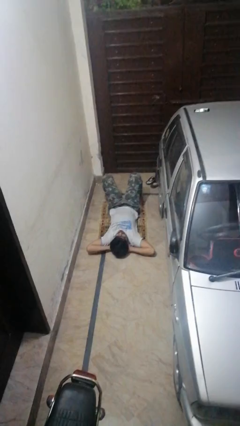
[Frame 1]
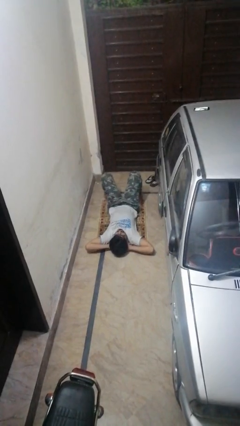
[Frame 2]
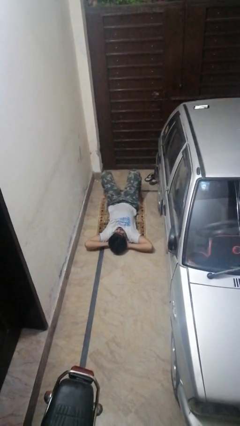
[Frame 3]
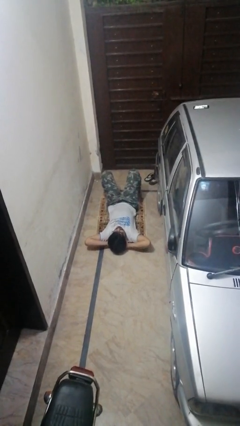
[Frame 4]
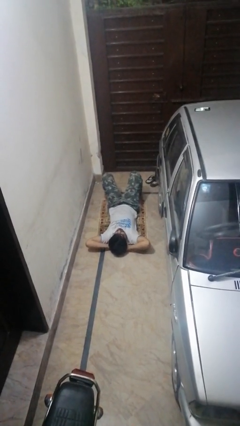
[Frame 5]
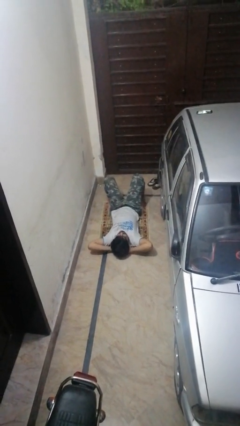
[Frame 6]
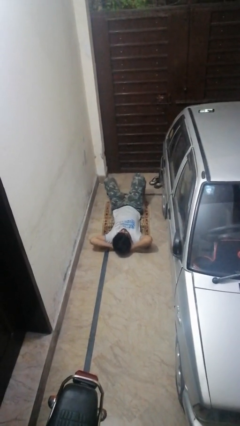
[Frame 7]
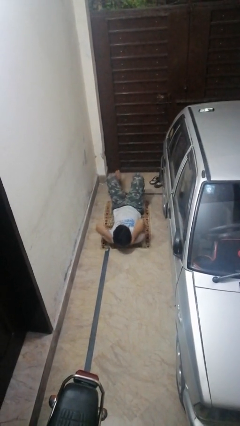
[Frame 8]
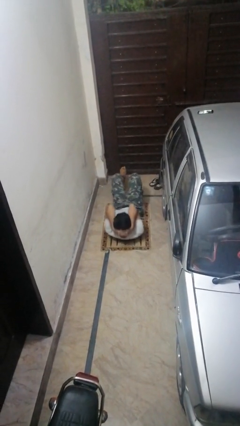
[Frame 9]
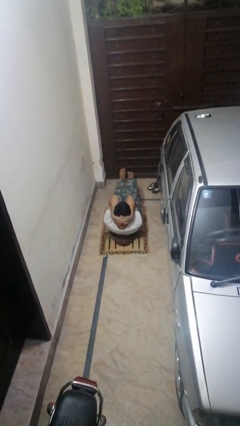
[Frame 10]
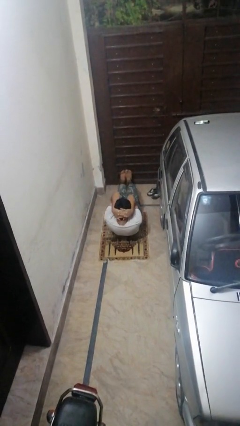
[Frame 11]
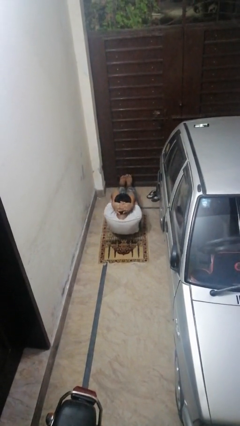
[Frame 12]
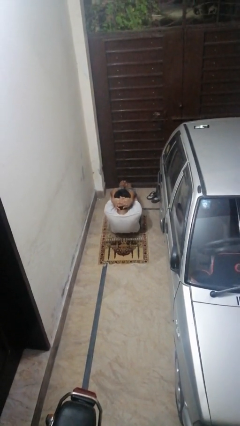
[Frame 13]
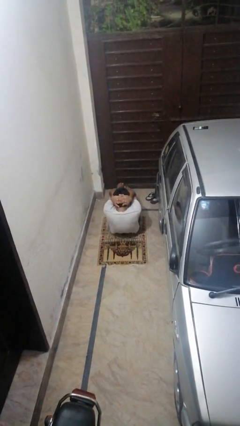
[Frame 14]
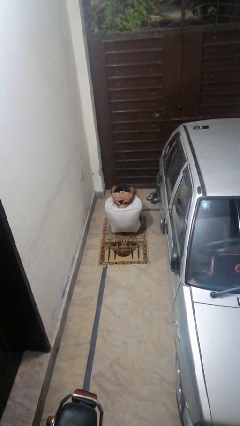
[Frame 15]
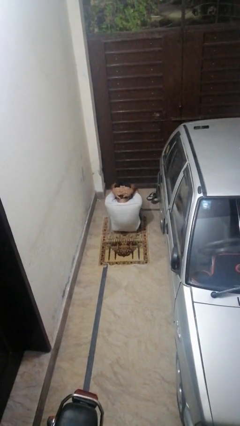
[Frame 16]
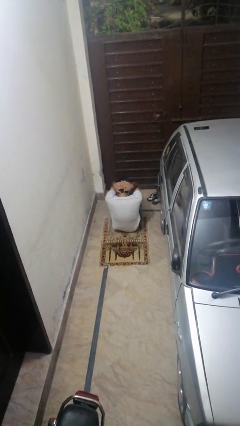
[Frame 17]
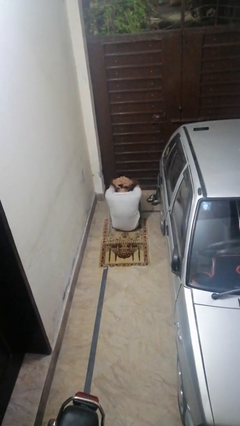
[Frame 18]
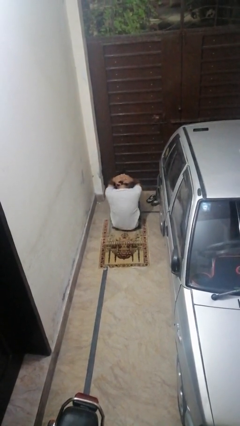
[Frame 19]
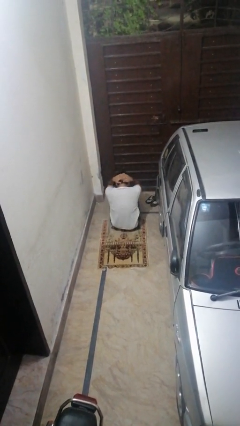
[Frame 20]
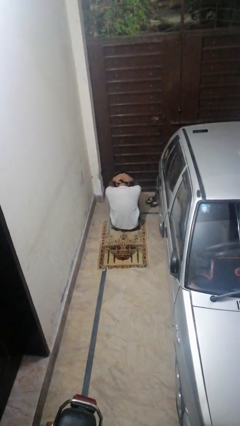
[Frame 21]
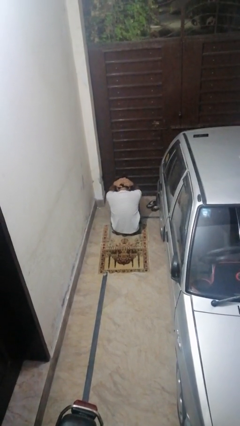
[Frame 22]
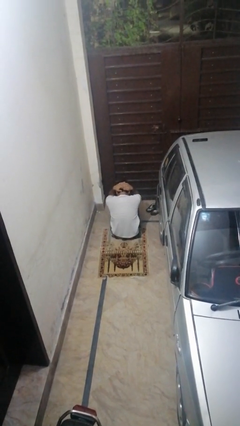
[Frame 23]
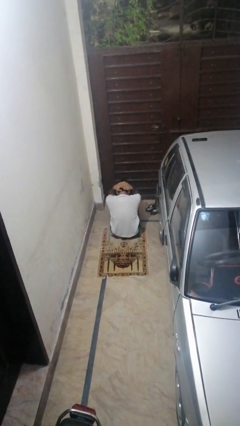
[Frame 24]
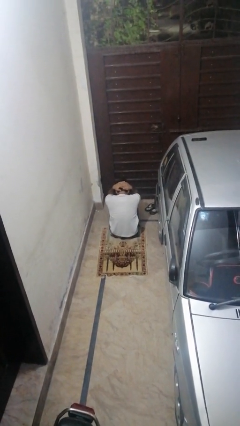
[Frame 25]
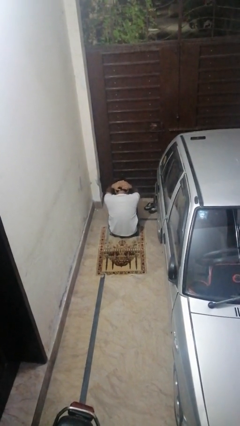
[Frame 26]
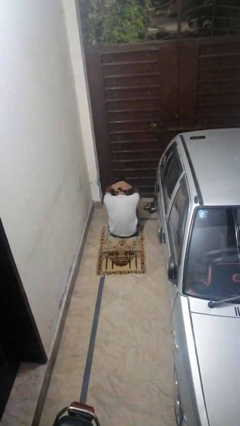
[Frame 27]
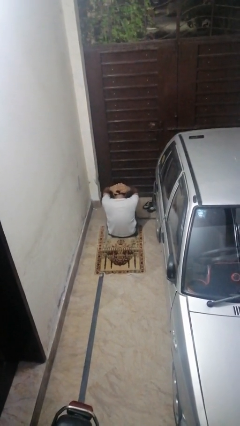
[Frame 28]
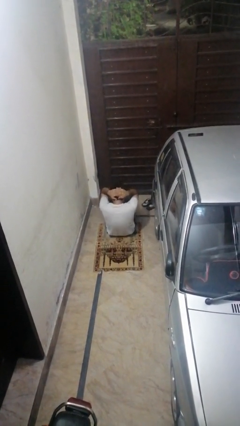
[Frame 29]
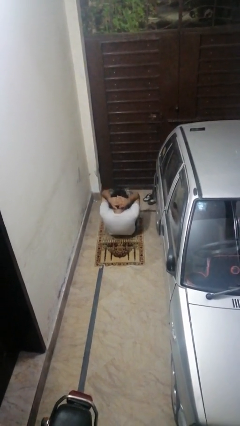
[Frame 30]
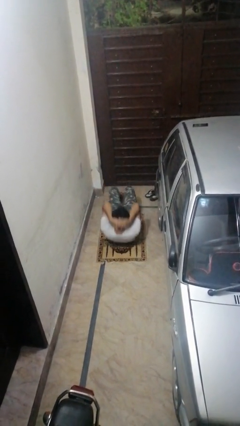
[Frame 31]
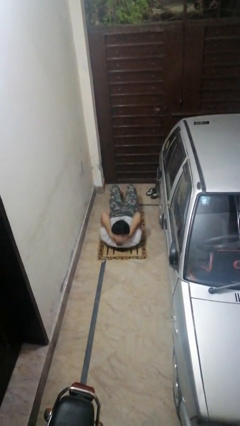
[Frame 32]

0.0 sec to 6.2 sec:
person exercises with situp

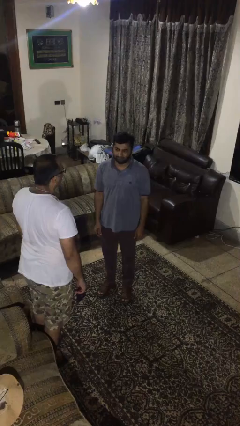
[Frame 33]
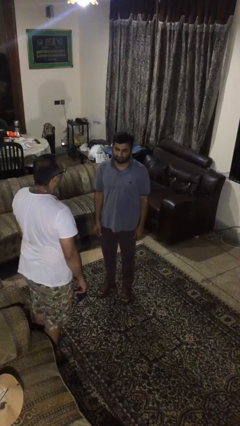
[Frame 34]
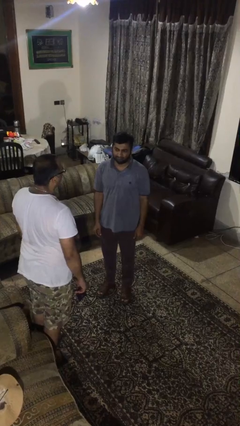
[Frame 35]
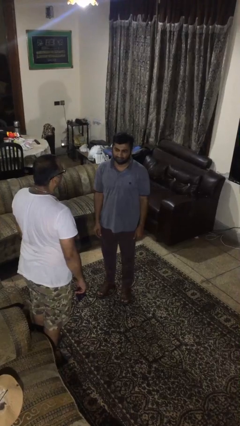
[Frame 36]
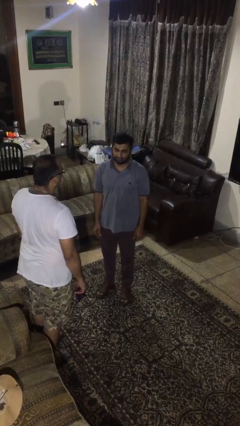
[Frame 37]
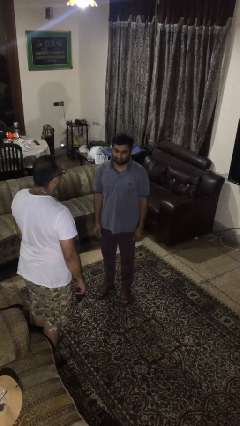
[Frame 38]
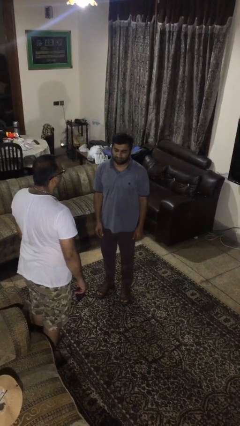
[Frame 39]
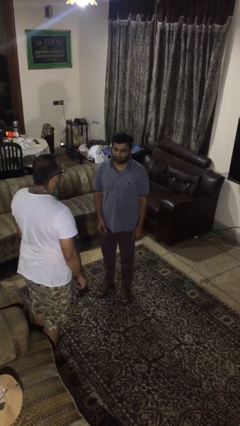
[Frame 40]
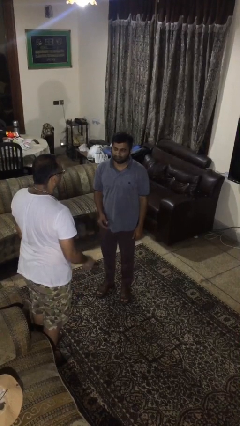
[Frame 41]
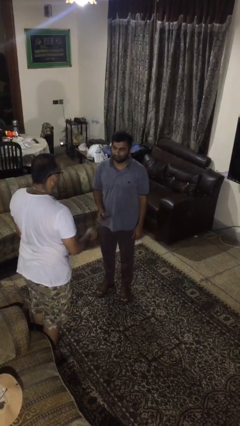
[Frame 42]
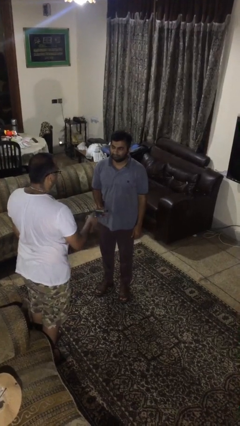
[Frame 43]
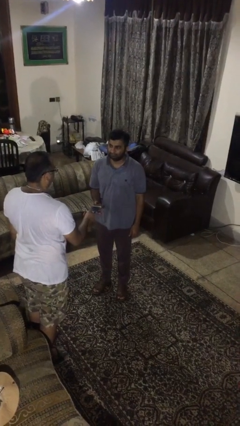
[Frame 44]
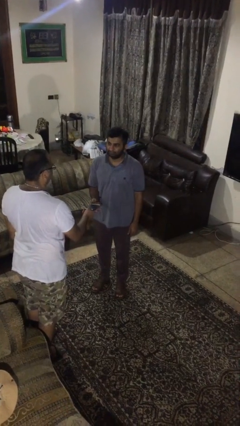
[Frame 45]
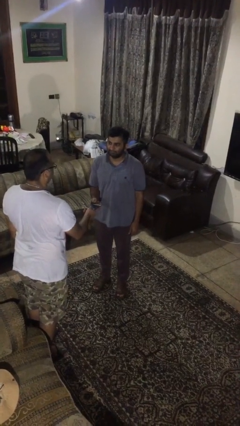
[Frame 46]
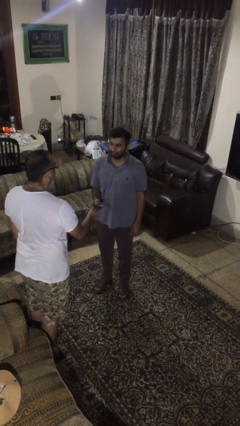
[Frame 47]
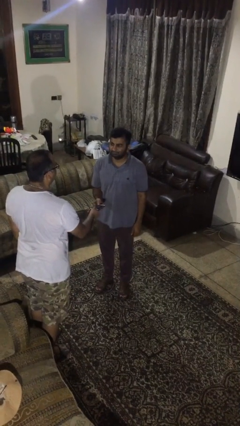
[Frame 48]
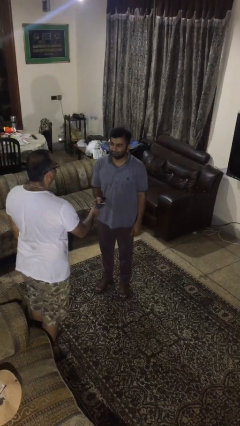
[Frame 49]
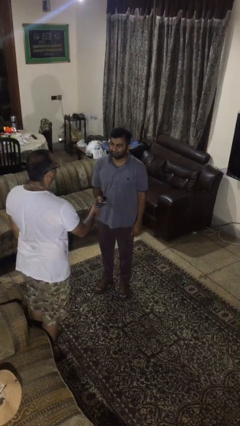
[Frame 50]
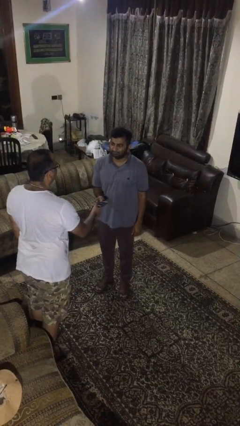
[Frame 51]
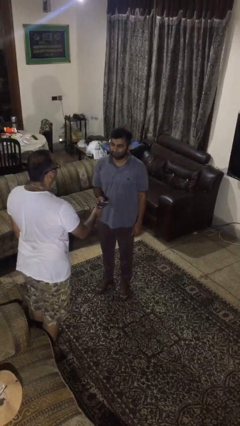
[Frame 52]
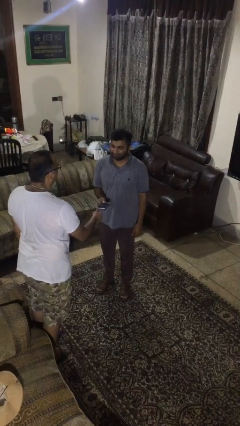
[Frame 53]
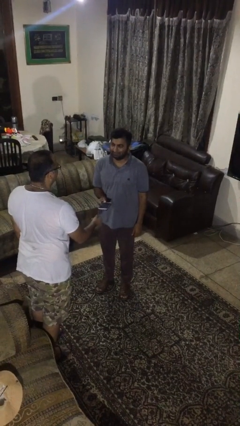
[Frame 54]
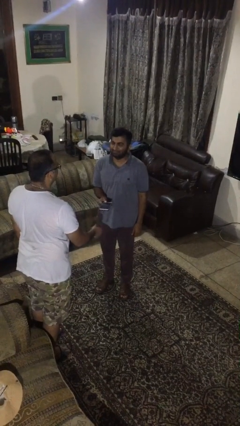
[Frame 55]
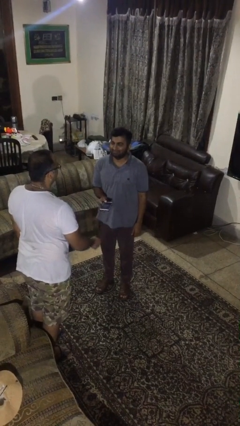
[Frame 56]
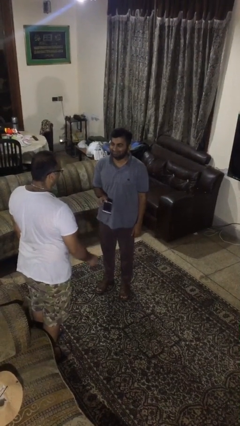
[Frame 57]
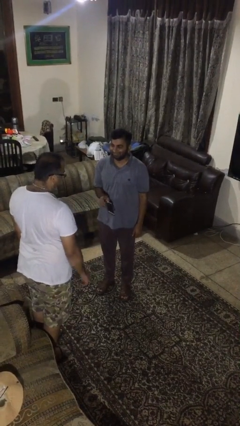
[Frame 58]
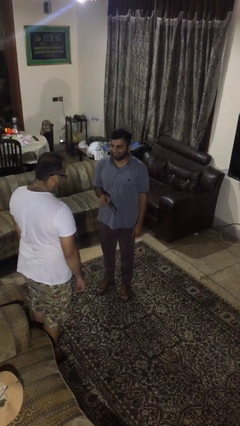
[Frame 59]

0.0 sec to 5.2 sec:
person transfers object to person

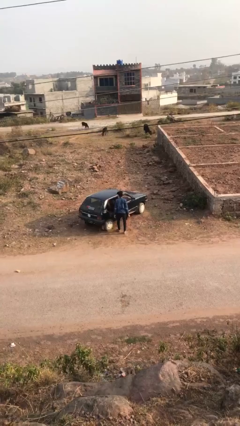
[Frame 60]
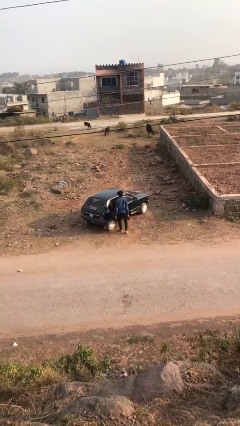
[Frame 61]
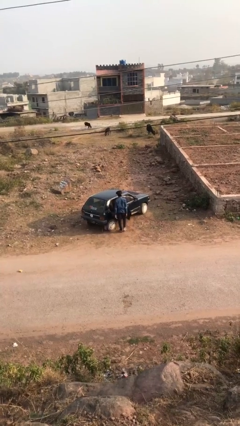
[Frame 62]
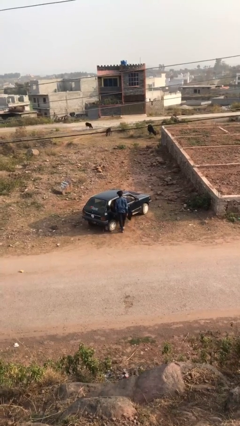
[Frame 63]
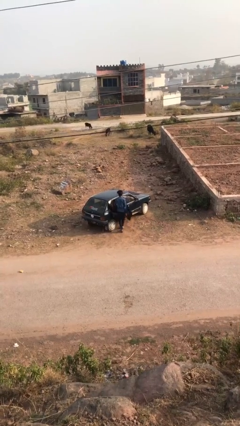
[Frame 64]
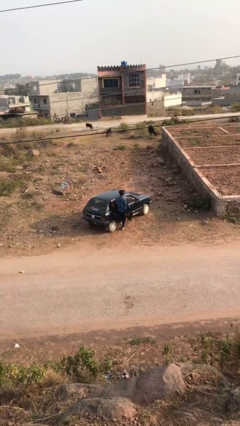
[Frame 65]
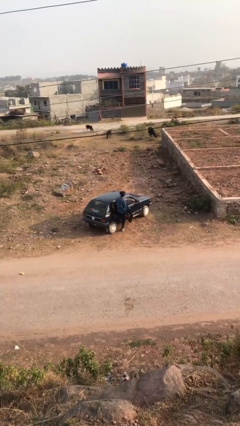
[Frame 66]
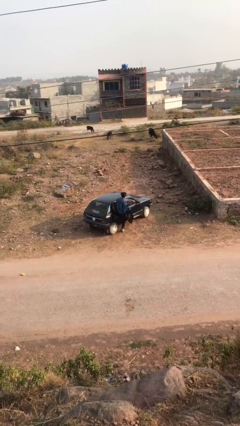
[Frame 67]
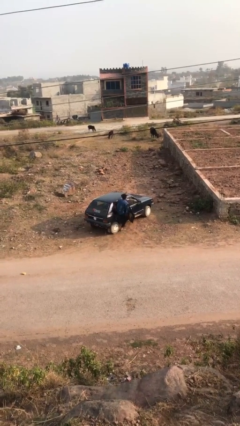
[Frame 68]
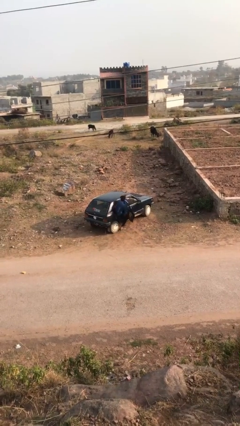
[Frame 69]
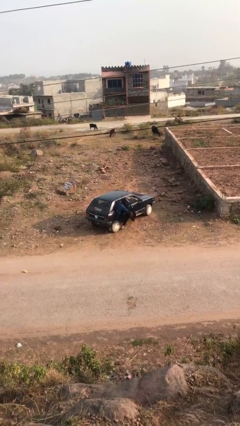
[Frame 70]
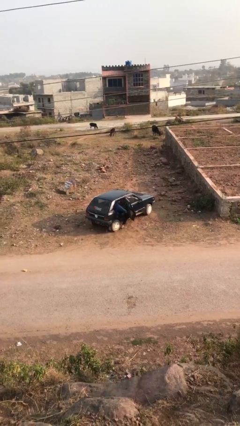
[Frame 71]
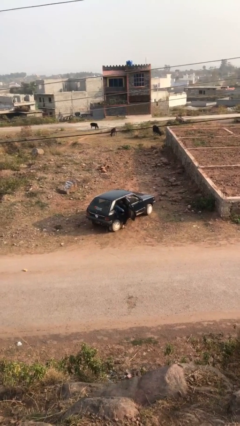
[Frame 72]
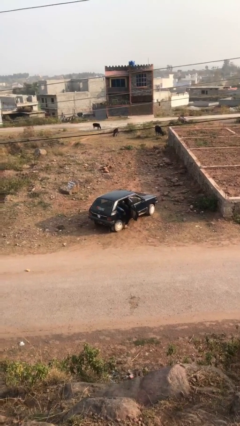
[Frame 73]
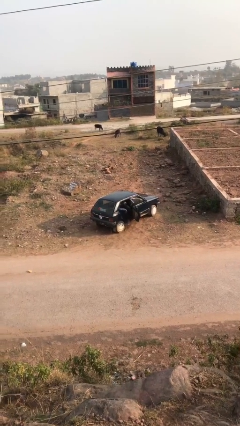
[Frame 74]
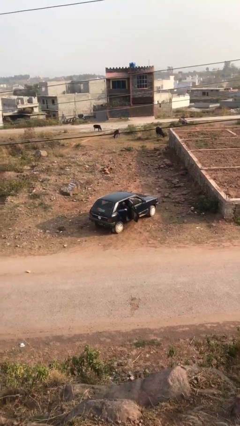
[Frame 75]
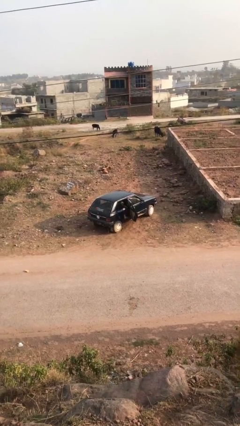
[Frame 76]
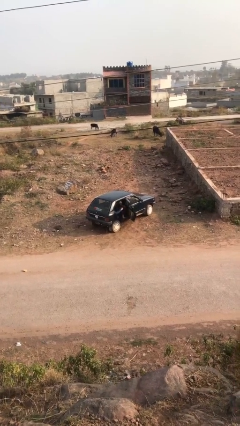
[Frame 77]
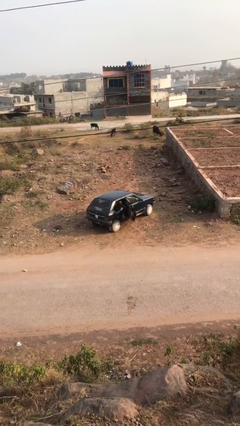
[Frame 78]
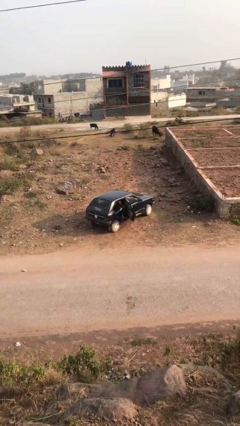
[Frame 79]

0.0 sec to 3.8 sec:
person enters car

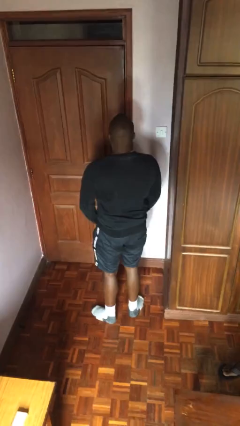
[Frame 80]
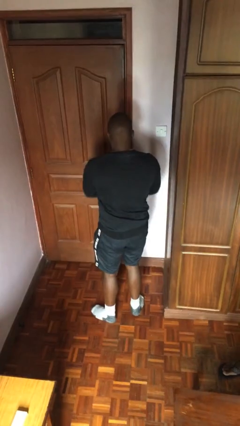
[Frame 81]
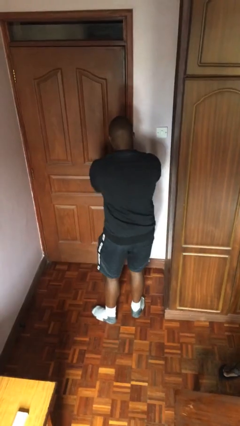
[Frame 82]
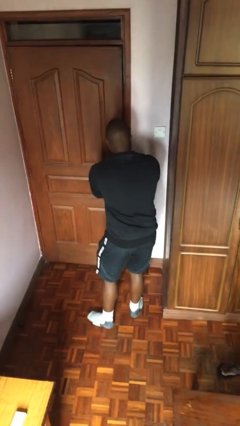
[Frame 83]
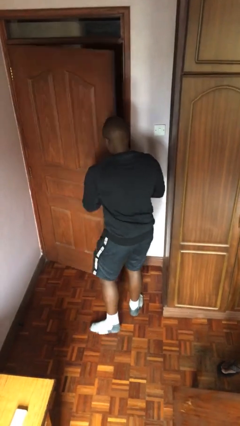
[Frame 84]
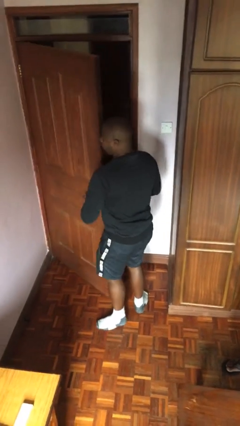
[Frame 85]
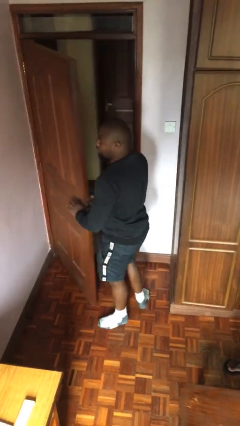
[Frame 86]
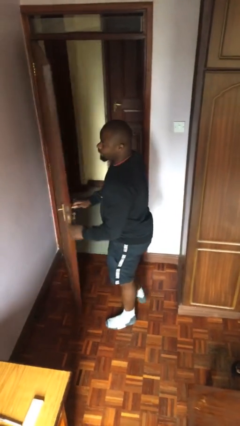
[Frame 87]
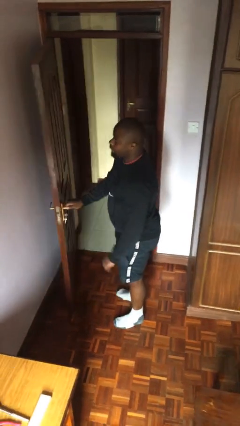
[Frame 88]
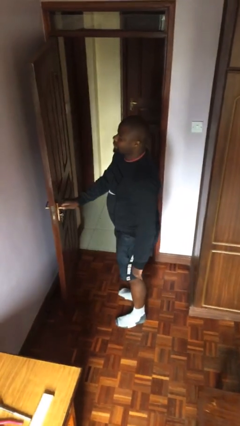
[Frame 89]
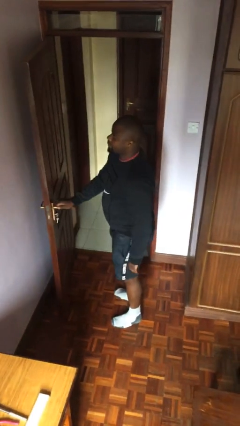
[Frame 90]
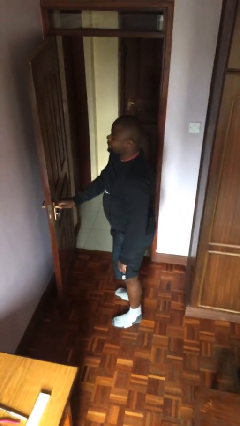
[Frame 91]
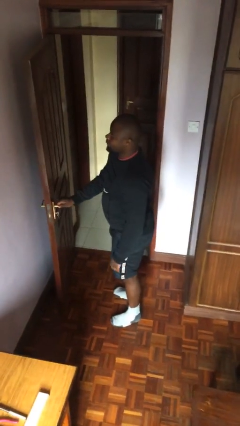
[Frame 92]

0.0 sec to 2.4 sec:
person opens facility door

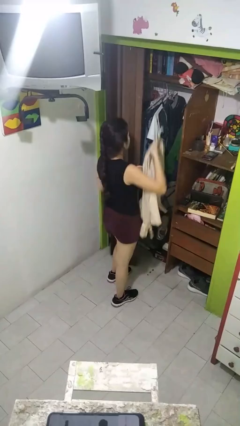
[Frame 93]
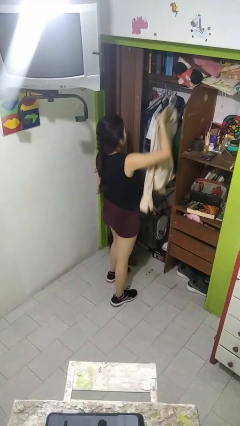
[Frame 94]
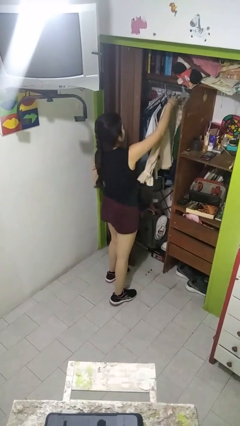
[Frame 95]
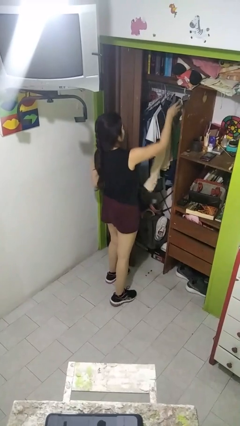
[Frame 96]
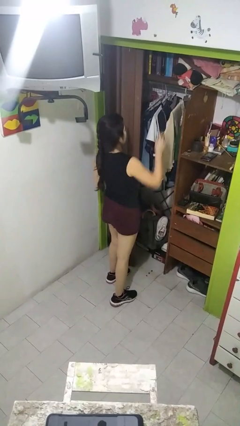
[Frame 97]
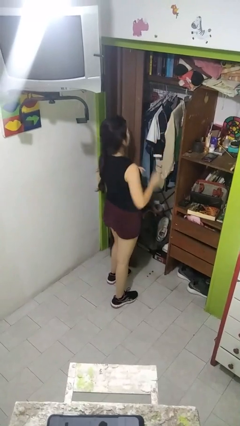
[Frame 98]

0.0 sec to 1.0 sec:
person puts clothes into closet
